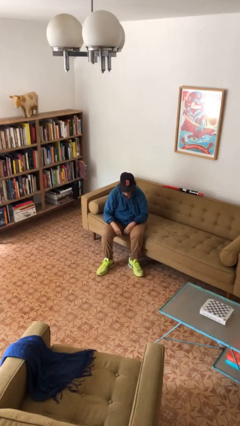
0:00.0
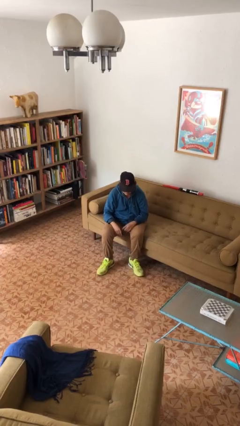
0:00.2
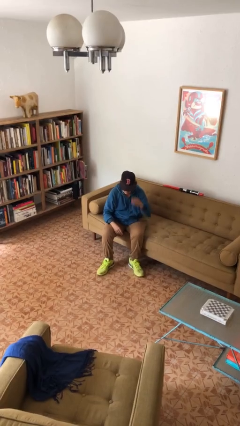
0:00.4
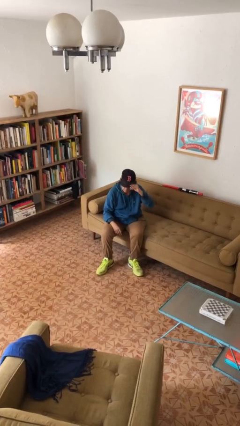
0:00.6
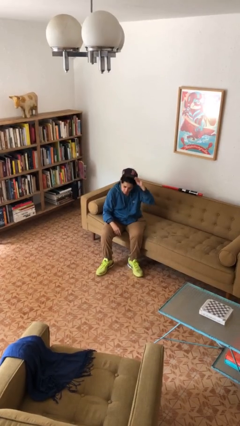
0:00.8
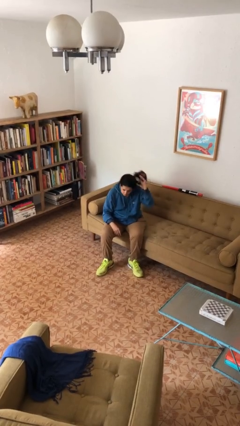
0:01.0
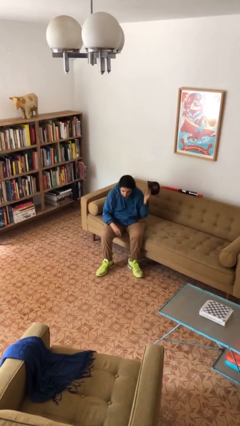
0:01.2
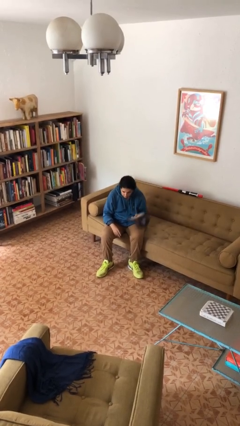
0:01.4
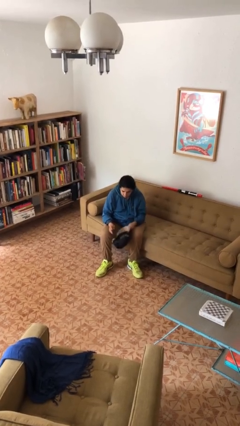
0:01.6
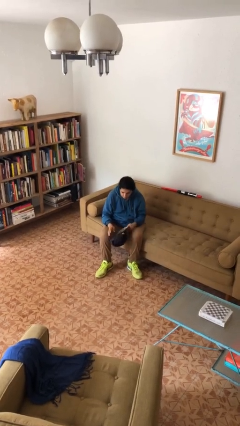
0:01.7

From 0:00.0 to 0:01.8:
person takes off hat

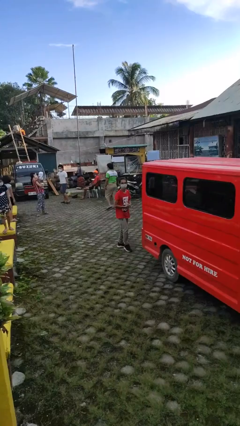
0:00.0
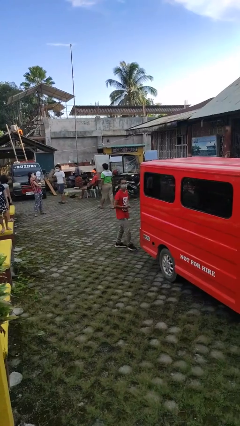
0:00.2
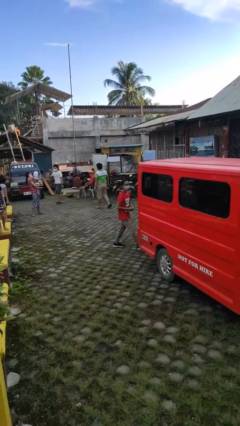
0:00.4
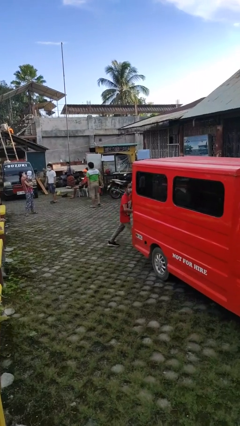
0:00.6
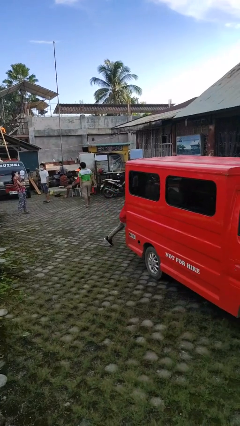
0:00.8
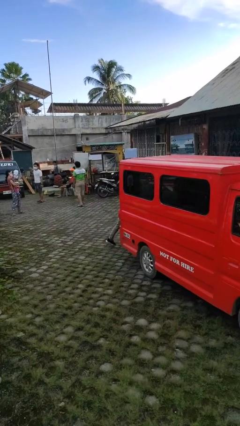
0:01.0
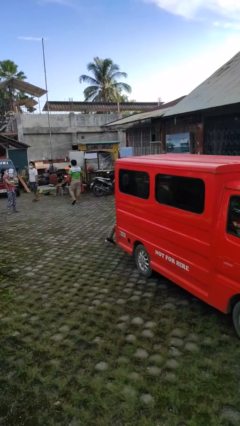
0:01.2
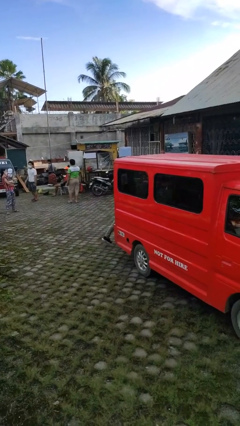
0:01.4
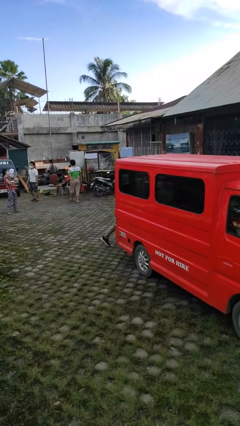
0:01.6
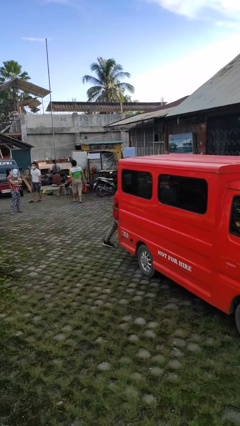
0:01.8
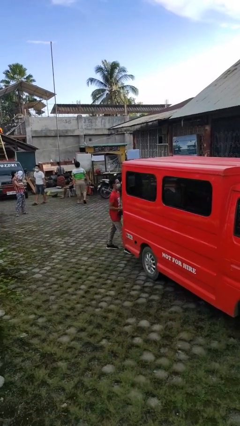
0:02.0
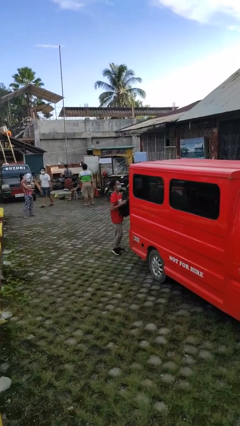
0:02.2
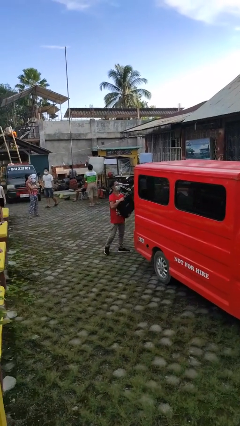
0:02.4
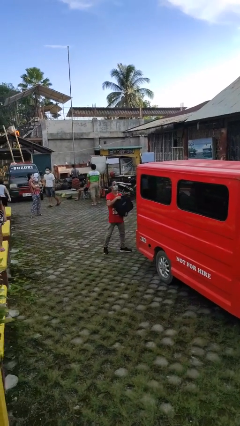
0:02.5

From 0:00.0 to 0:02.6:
person unloads car

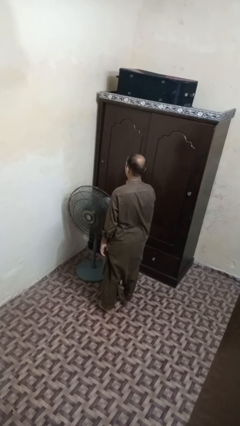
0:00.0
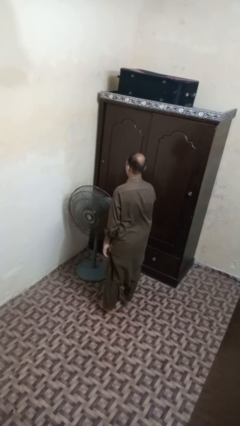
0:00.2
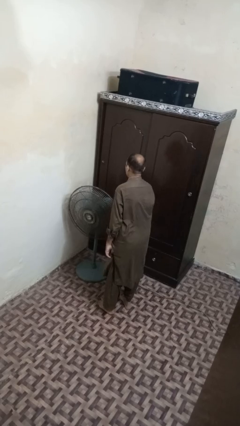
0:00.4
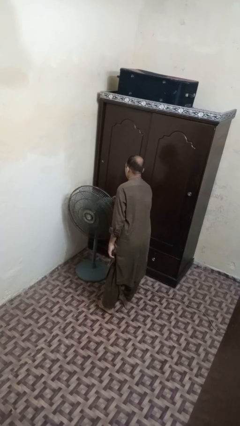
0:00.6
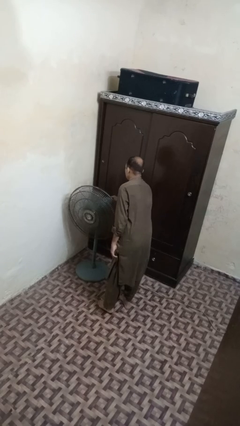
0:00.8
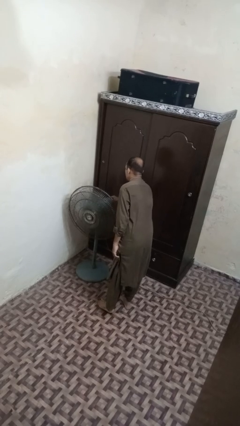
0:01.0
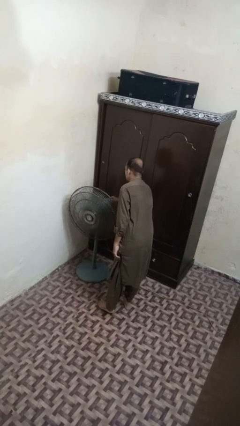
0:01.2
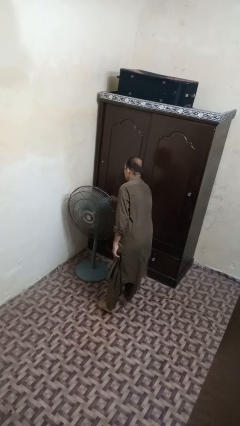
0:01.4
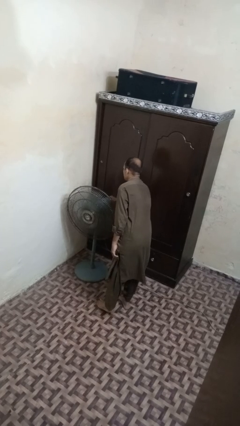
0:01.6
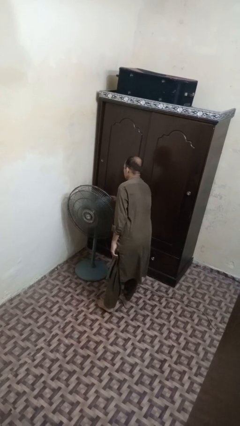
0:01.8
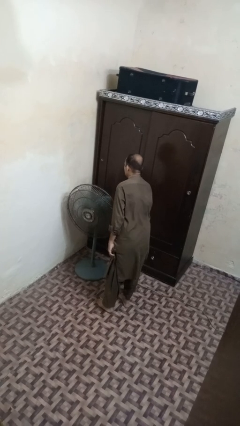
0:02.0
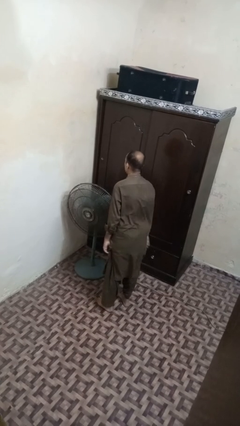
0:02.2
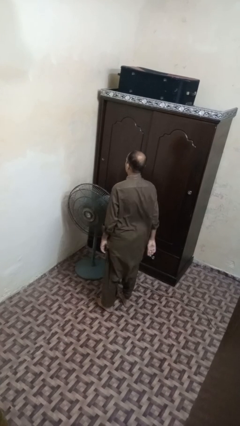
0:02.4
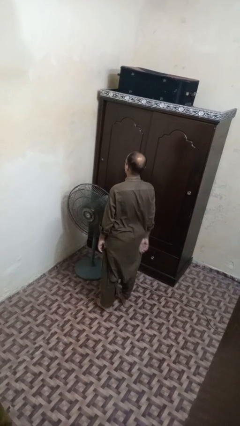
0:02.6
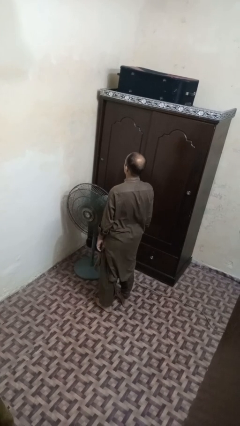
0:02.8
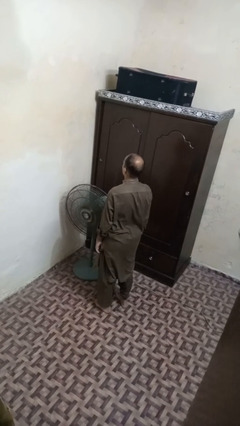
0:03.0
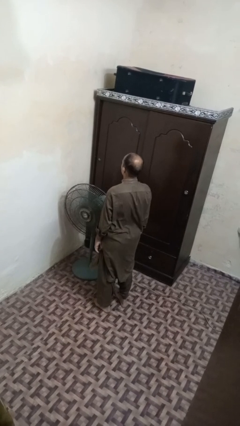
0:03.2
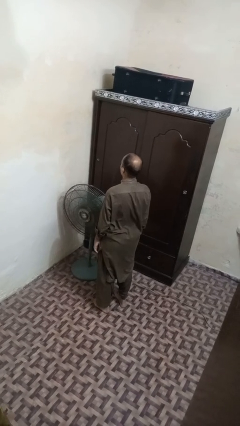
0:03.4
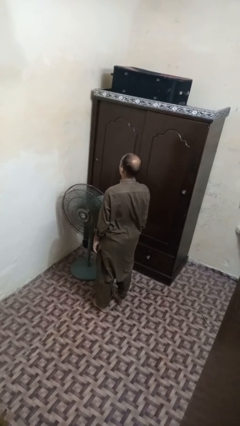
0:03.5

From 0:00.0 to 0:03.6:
person turns on fan

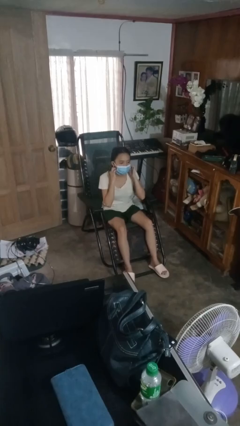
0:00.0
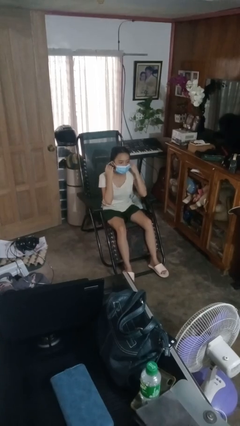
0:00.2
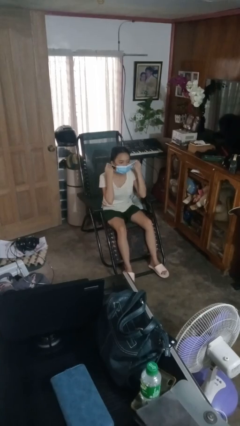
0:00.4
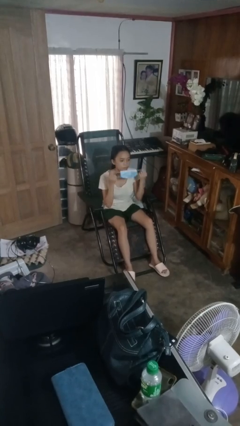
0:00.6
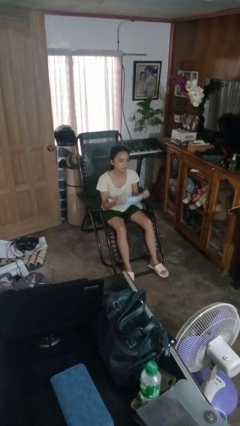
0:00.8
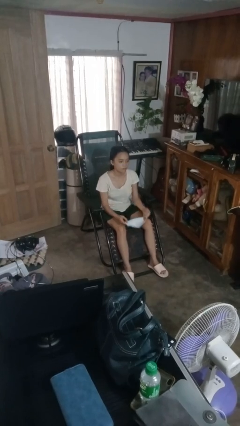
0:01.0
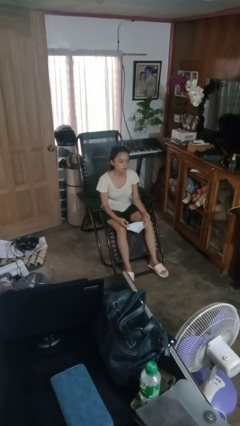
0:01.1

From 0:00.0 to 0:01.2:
person takes off facemask

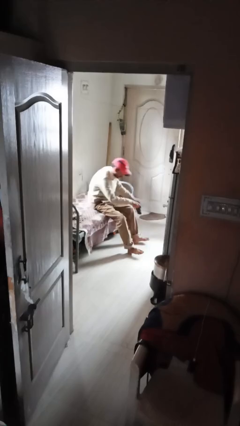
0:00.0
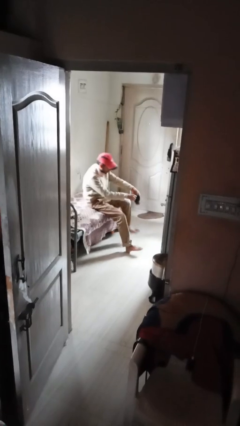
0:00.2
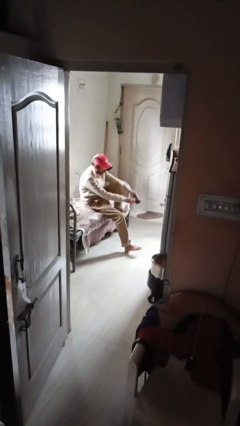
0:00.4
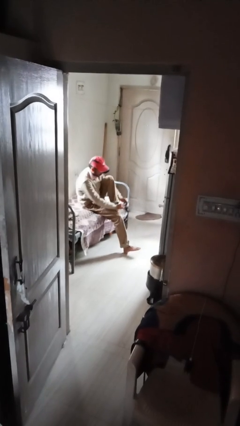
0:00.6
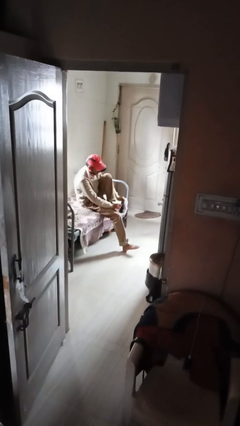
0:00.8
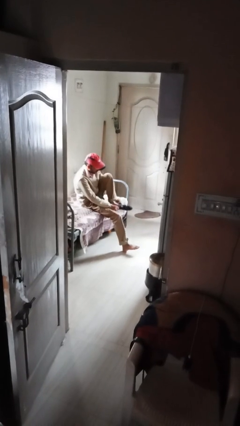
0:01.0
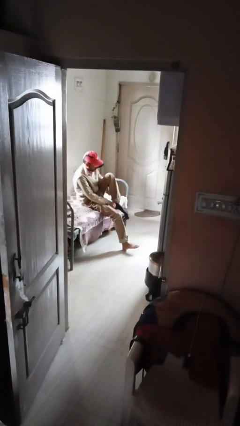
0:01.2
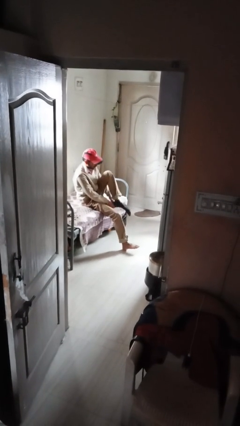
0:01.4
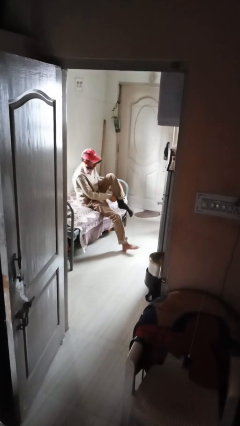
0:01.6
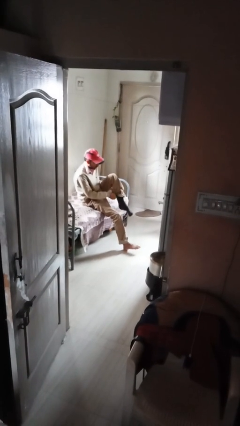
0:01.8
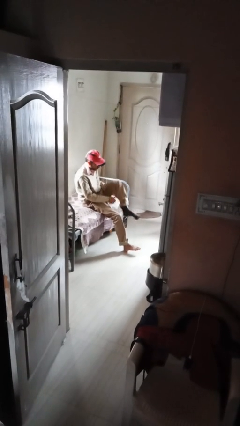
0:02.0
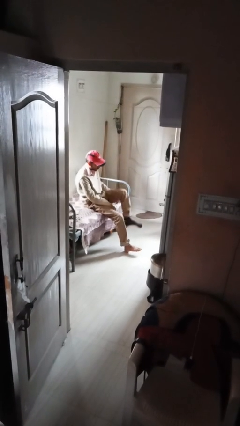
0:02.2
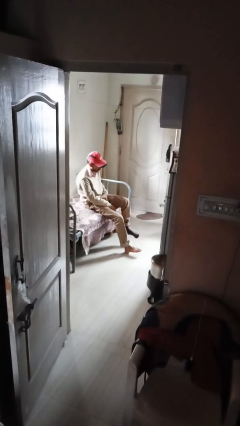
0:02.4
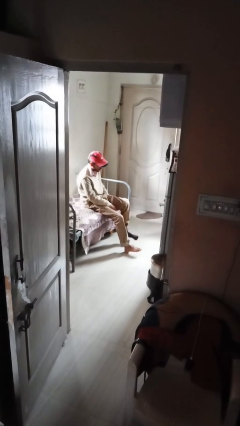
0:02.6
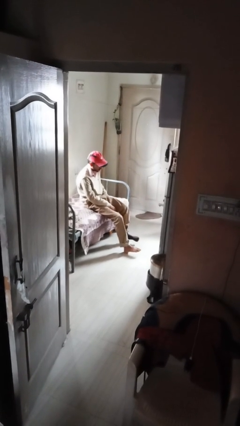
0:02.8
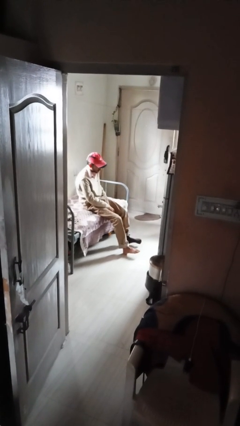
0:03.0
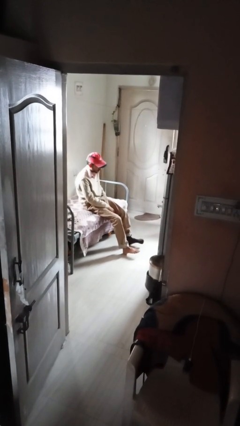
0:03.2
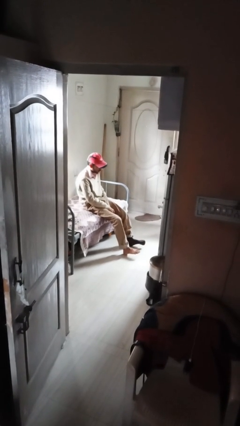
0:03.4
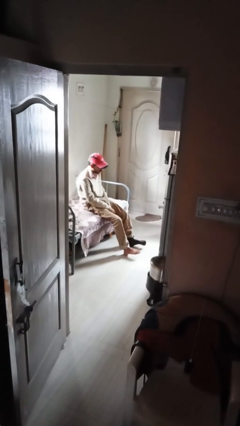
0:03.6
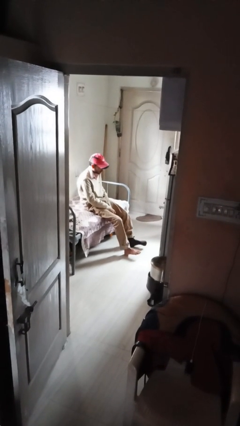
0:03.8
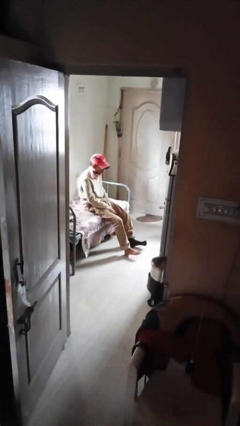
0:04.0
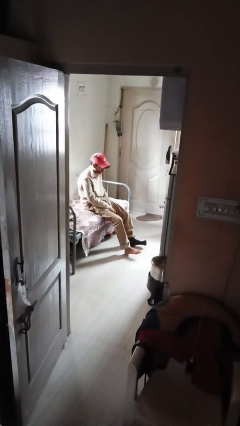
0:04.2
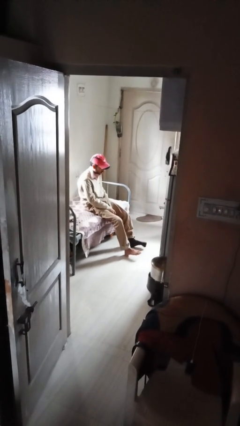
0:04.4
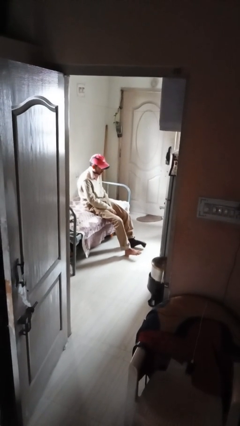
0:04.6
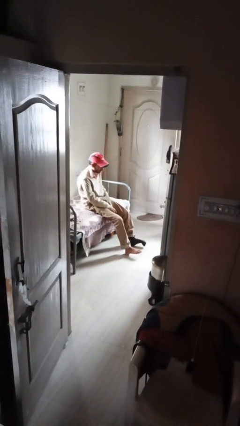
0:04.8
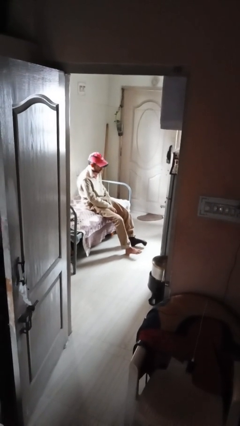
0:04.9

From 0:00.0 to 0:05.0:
person puts on socks

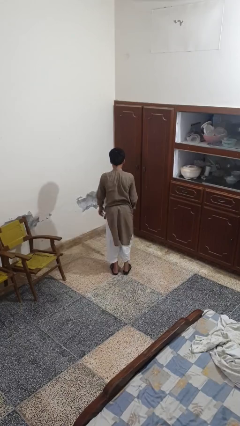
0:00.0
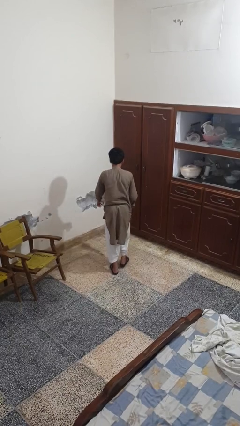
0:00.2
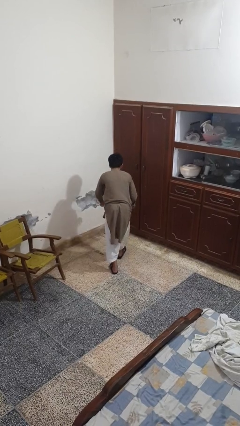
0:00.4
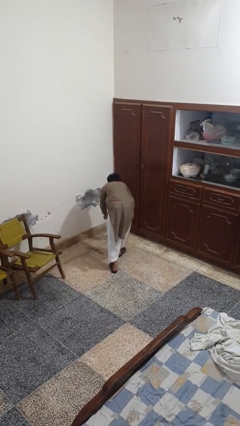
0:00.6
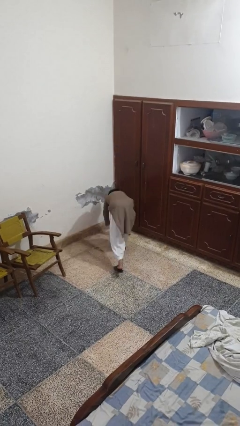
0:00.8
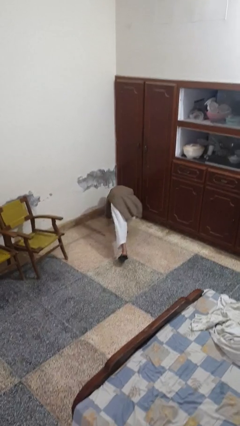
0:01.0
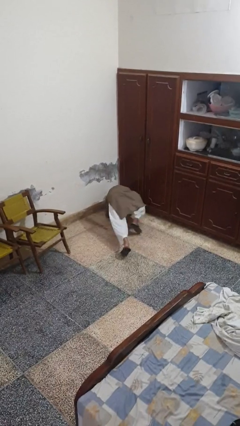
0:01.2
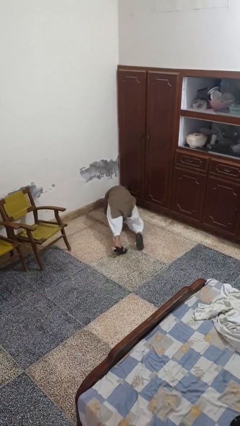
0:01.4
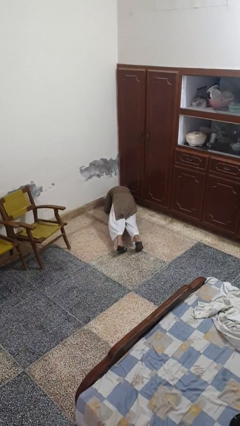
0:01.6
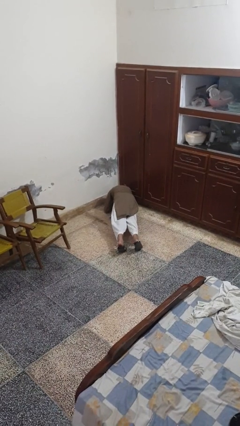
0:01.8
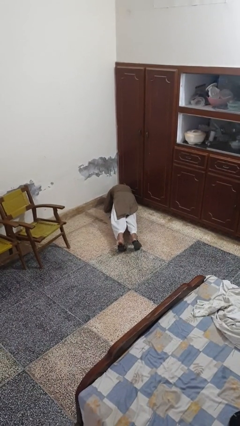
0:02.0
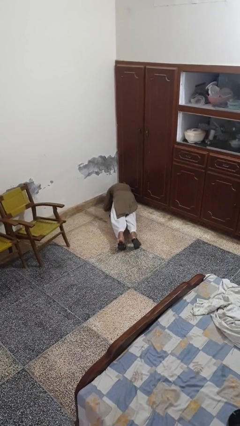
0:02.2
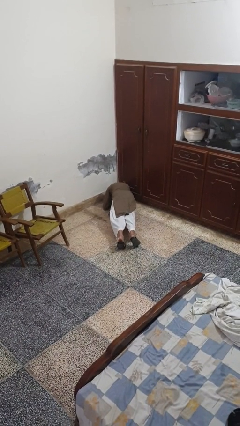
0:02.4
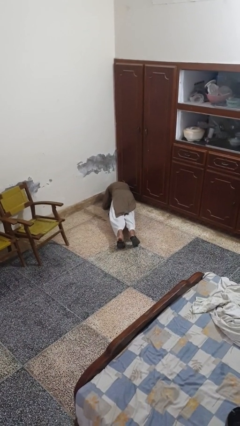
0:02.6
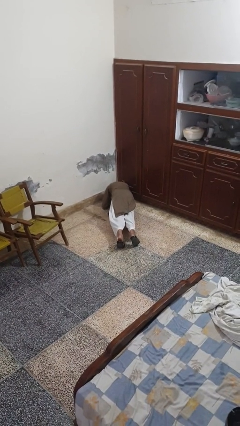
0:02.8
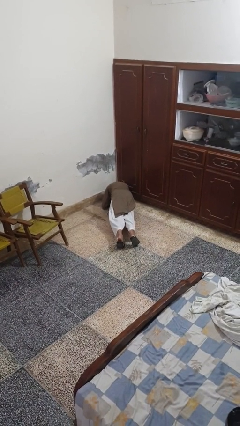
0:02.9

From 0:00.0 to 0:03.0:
person exercises with plank

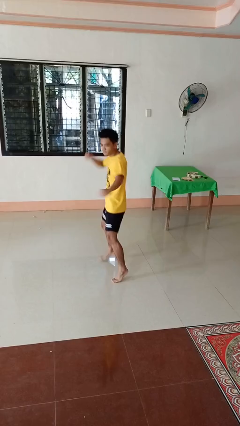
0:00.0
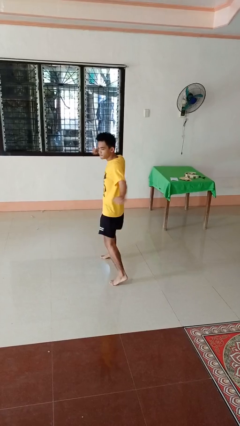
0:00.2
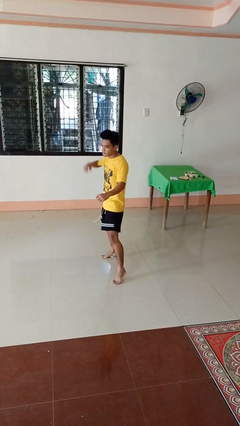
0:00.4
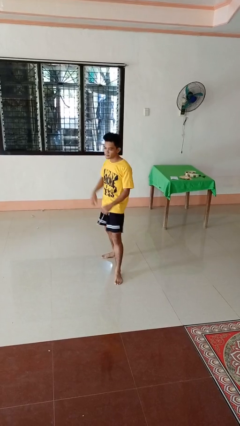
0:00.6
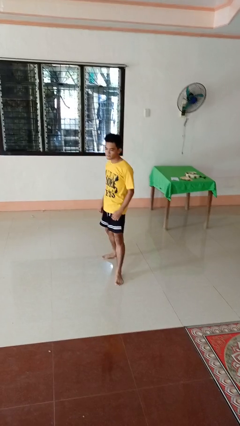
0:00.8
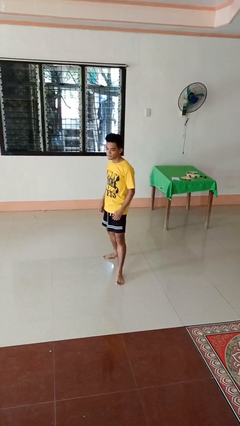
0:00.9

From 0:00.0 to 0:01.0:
person karate chop
